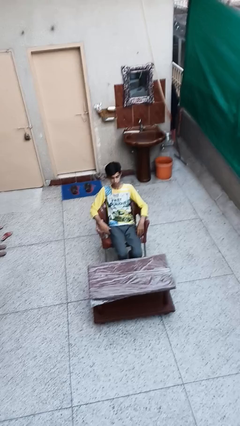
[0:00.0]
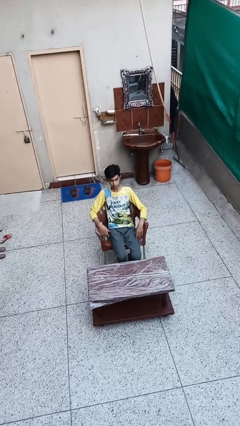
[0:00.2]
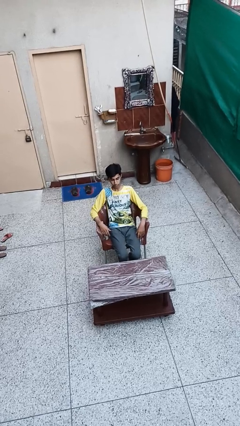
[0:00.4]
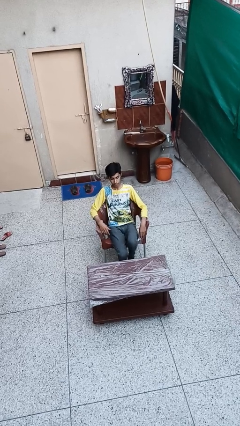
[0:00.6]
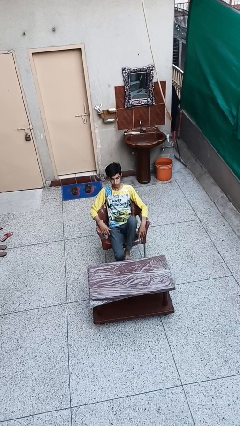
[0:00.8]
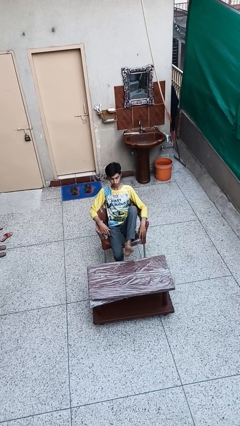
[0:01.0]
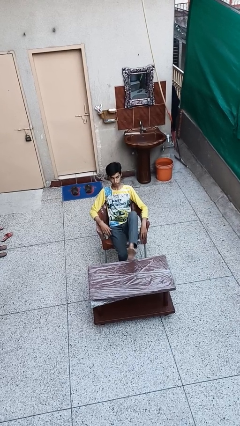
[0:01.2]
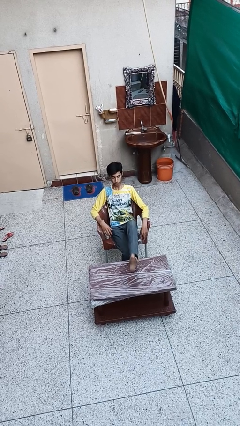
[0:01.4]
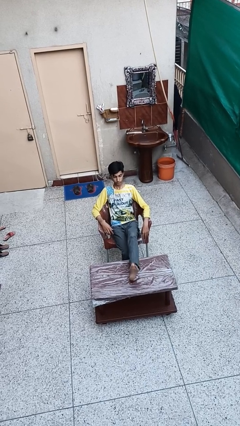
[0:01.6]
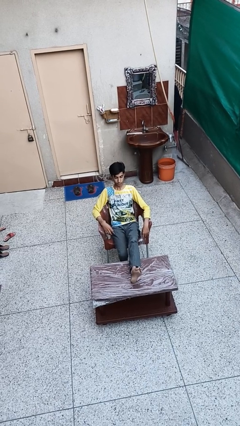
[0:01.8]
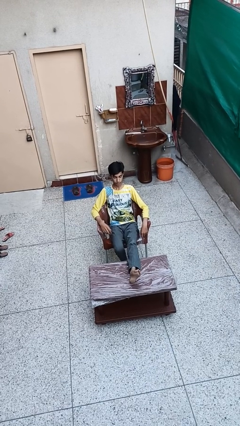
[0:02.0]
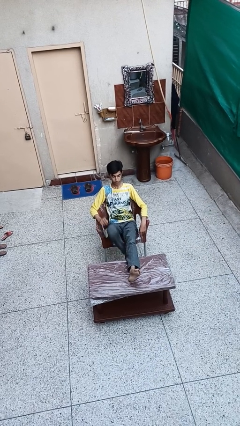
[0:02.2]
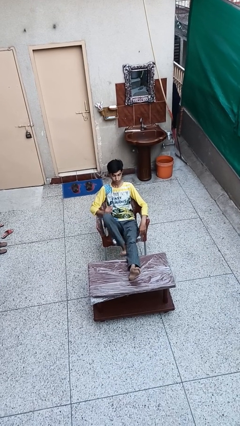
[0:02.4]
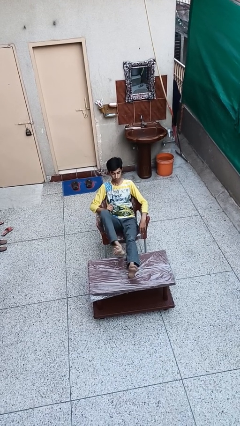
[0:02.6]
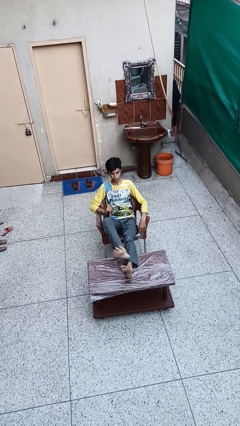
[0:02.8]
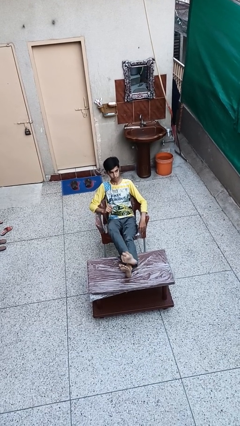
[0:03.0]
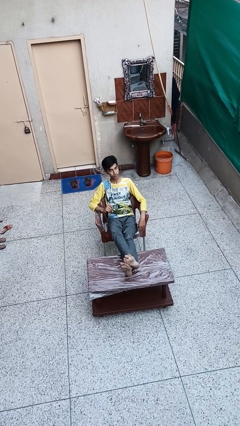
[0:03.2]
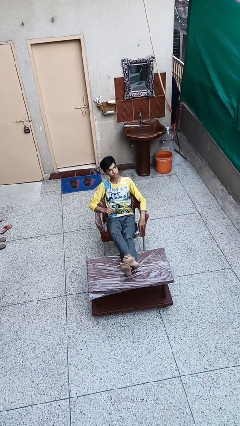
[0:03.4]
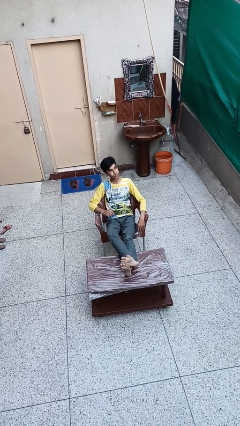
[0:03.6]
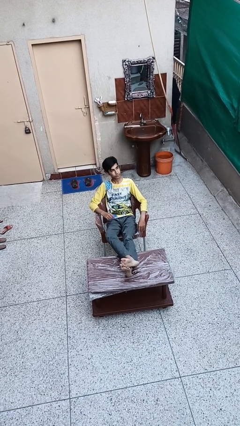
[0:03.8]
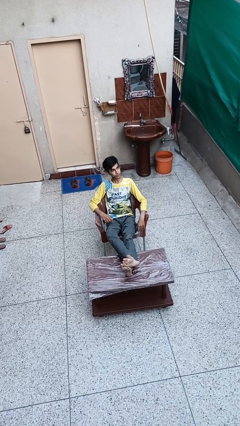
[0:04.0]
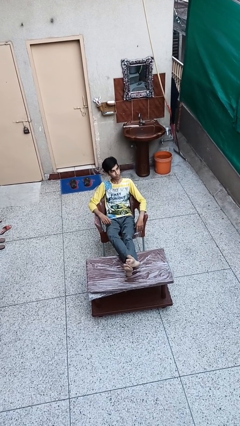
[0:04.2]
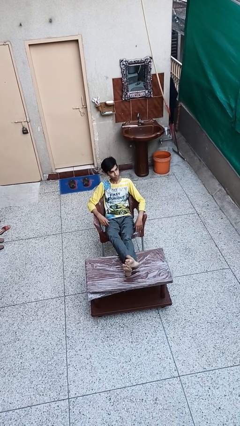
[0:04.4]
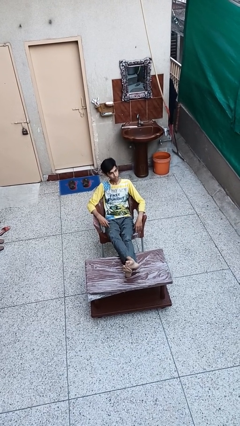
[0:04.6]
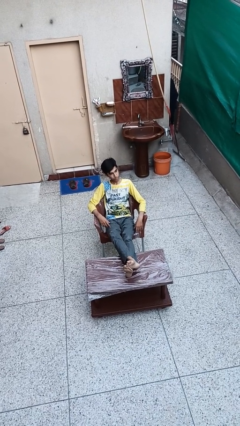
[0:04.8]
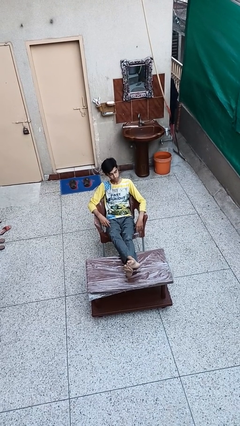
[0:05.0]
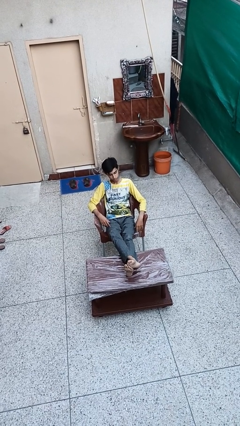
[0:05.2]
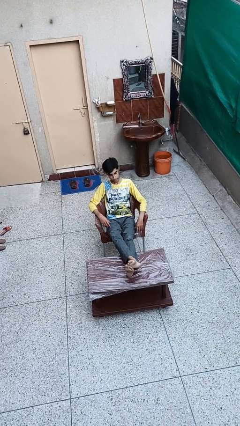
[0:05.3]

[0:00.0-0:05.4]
person puts feet up

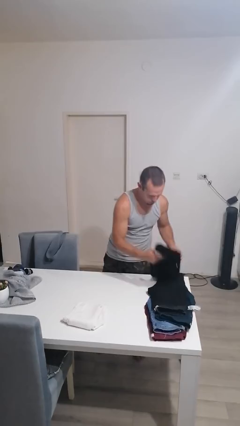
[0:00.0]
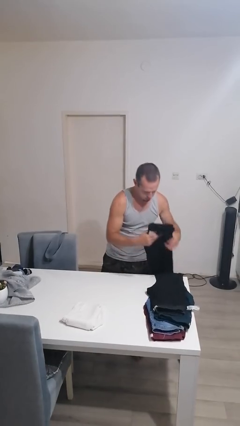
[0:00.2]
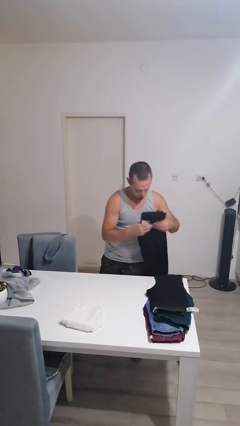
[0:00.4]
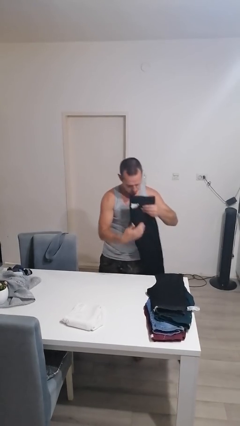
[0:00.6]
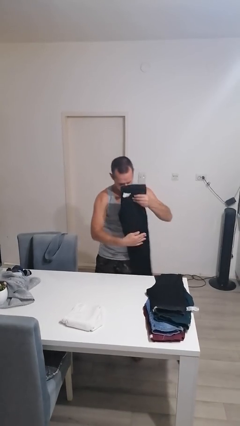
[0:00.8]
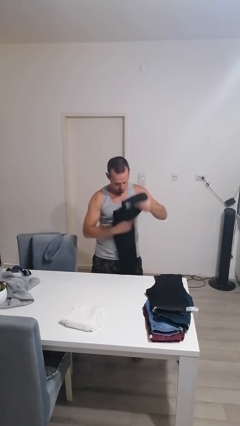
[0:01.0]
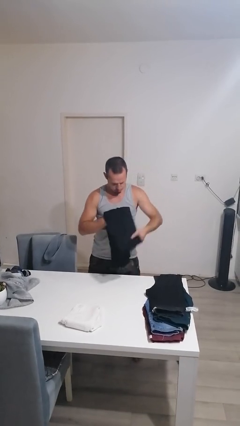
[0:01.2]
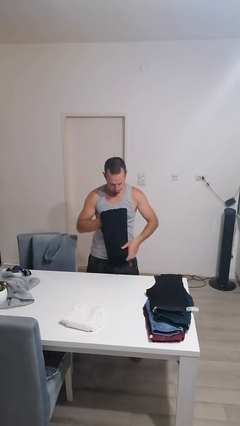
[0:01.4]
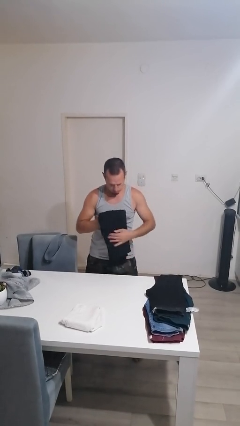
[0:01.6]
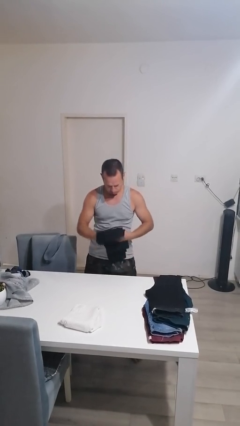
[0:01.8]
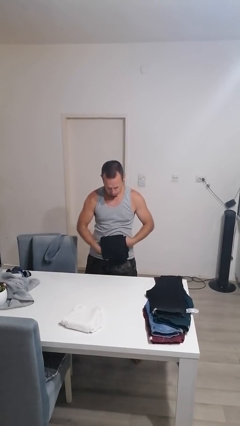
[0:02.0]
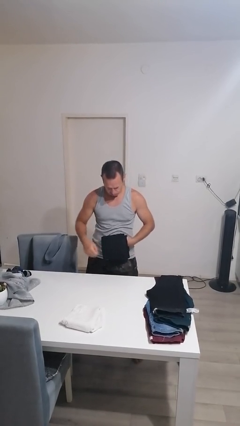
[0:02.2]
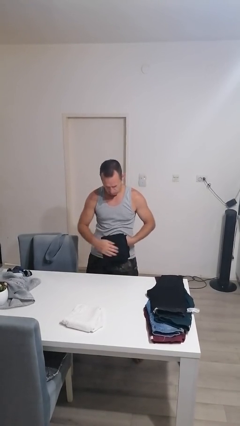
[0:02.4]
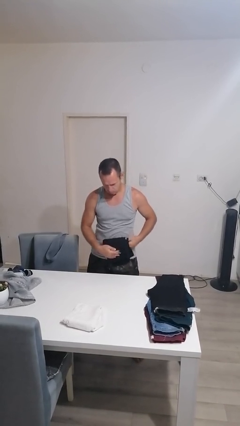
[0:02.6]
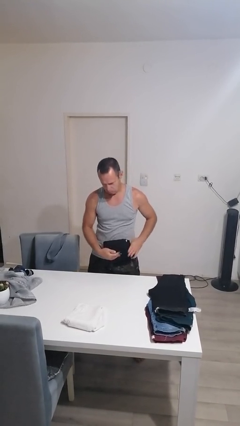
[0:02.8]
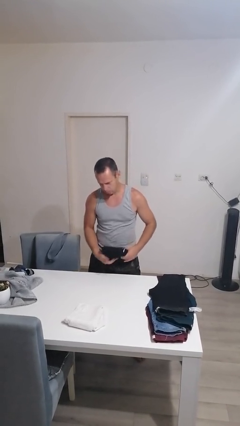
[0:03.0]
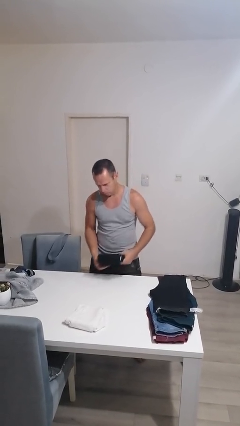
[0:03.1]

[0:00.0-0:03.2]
person folds pants

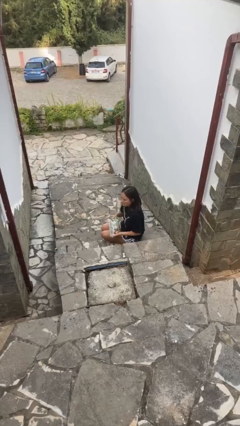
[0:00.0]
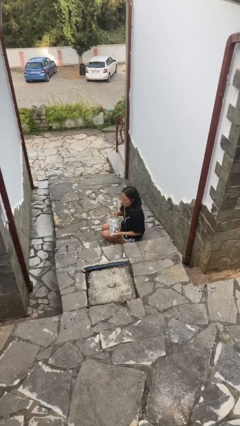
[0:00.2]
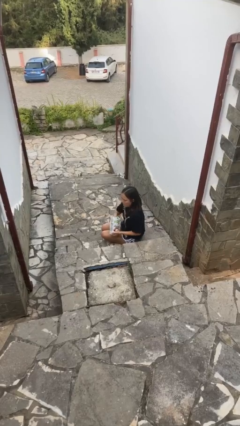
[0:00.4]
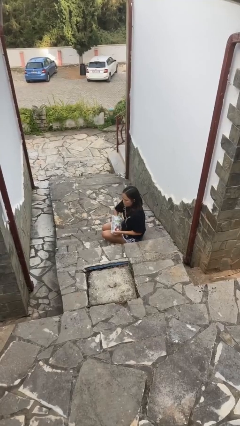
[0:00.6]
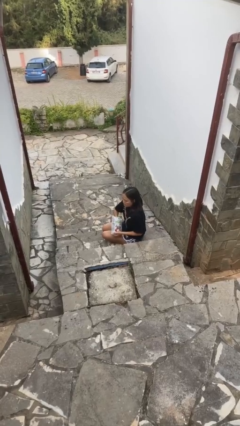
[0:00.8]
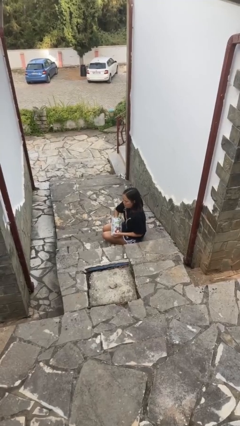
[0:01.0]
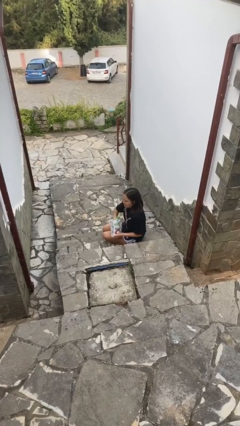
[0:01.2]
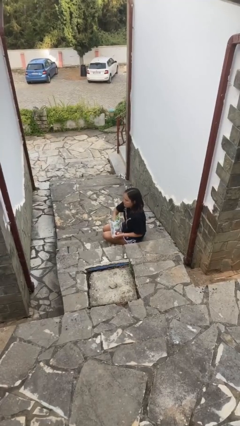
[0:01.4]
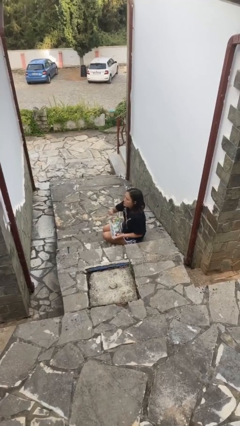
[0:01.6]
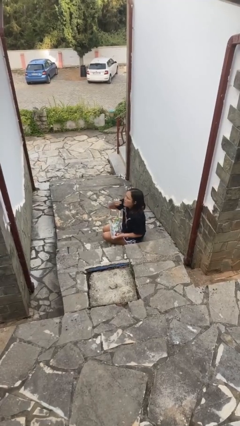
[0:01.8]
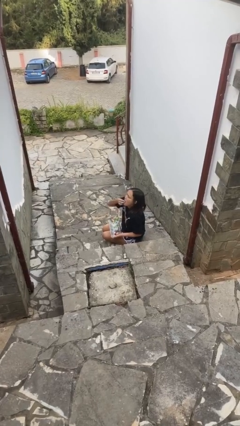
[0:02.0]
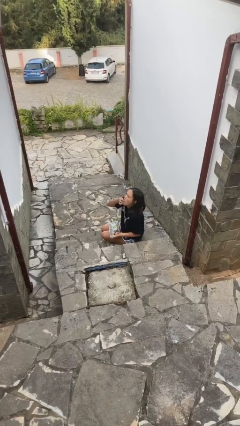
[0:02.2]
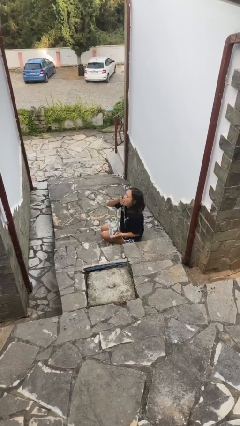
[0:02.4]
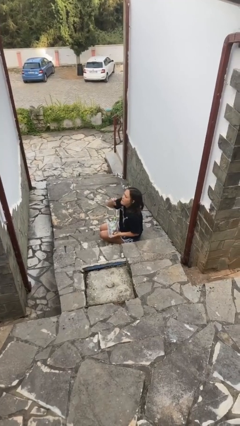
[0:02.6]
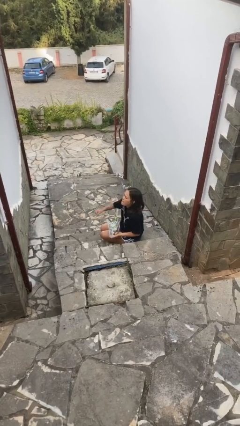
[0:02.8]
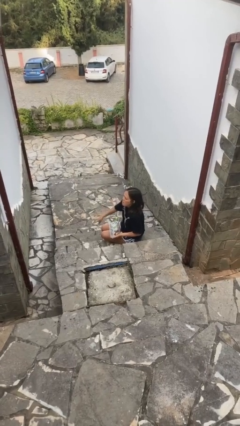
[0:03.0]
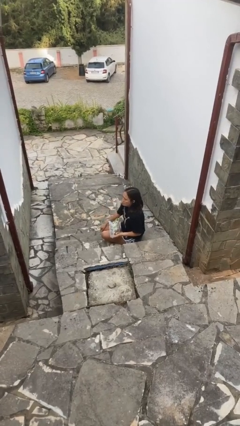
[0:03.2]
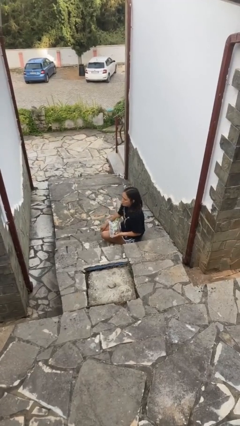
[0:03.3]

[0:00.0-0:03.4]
person eats snack from bag

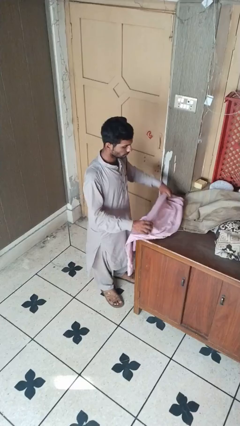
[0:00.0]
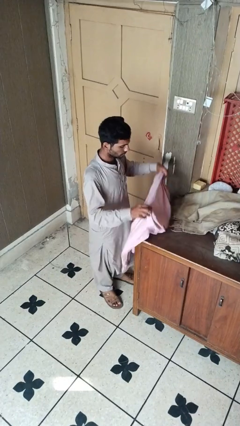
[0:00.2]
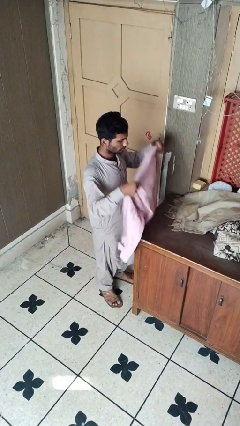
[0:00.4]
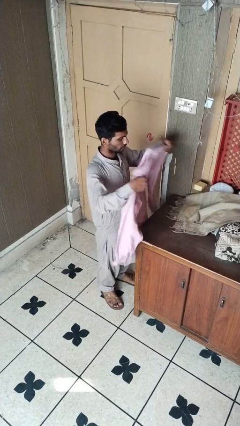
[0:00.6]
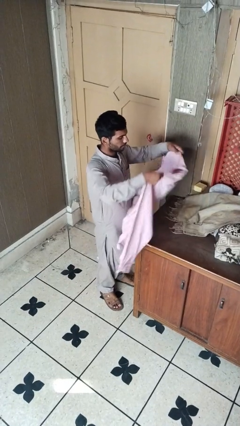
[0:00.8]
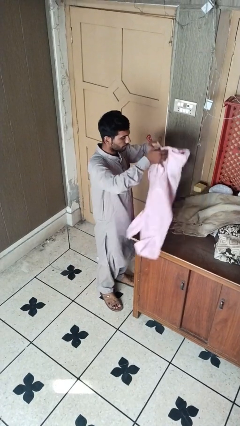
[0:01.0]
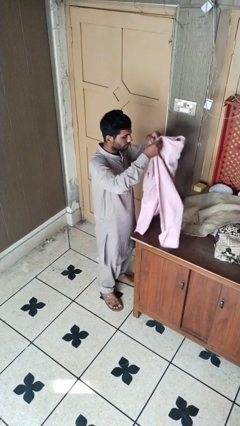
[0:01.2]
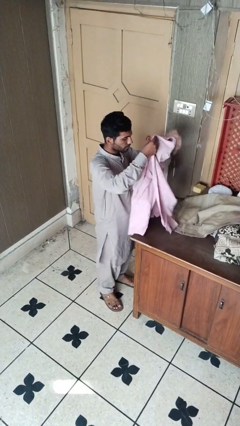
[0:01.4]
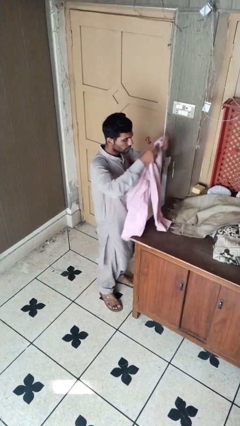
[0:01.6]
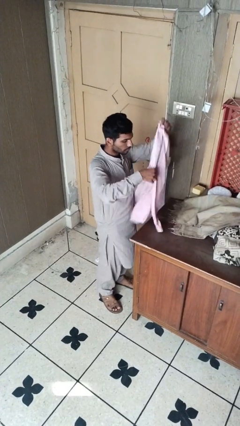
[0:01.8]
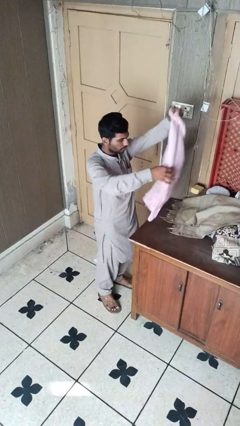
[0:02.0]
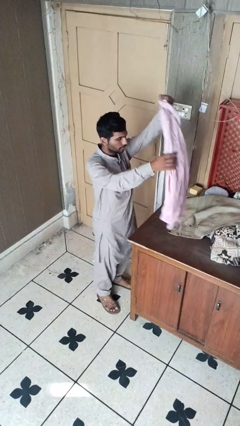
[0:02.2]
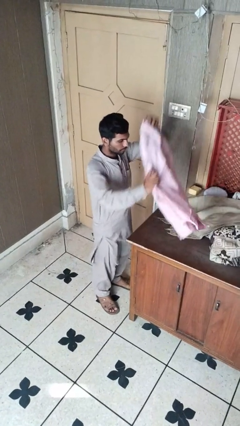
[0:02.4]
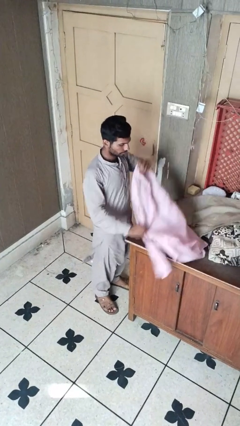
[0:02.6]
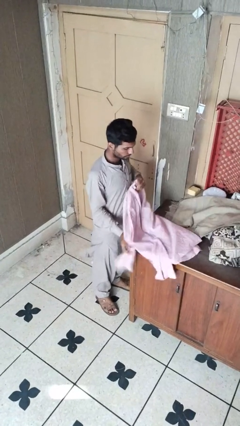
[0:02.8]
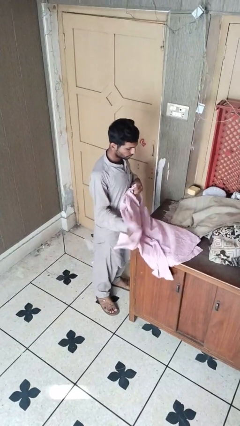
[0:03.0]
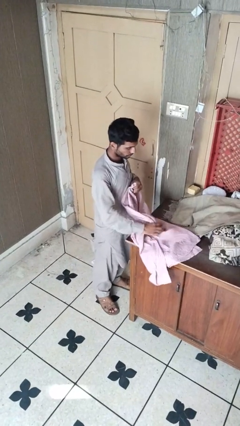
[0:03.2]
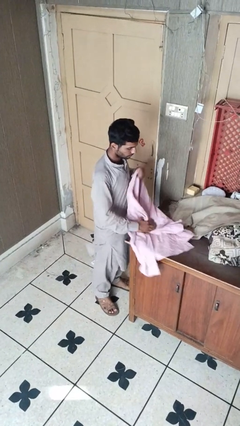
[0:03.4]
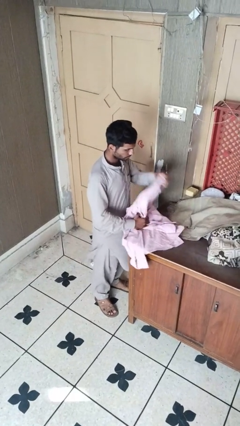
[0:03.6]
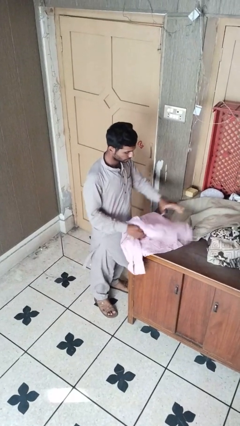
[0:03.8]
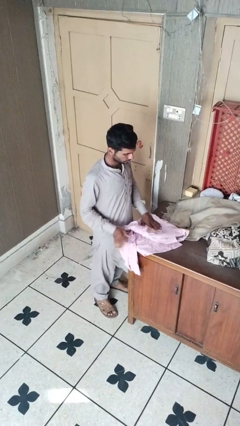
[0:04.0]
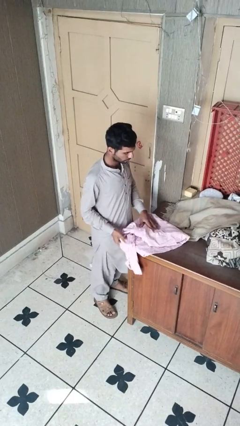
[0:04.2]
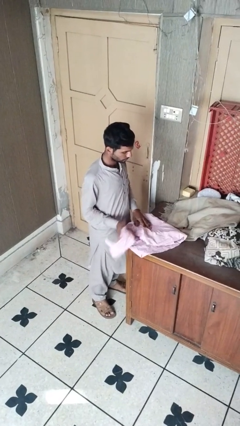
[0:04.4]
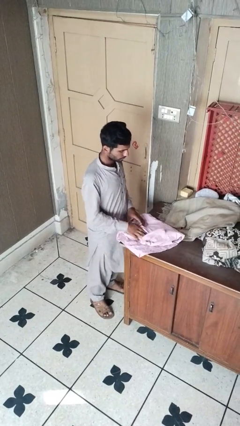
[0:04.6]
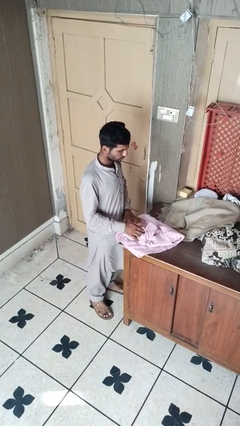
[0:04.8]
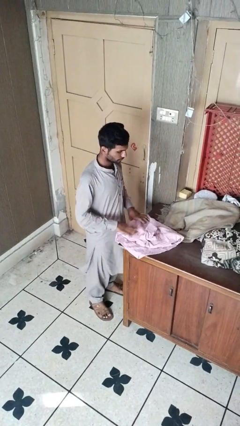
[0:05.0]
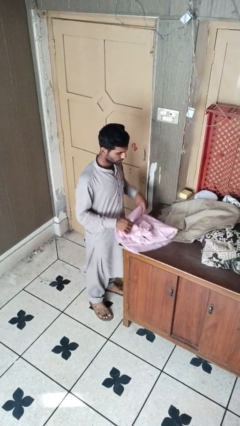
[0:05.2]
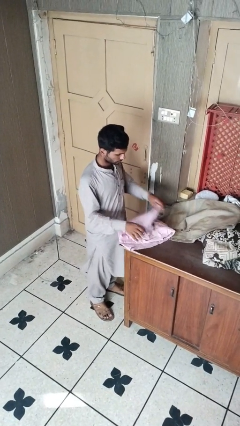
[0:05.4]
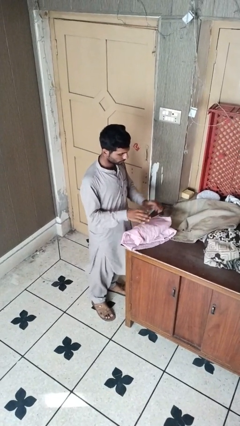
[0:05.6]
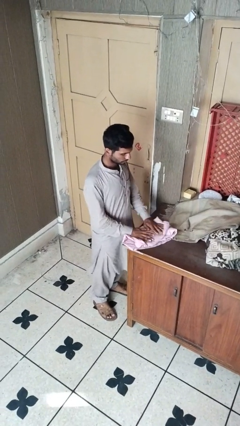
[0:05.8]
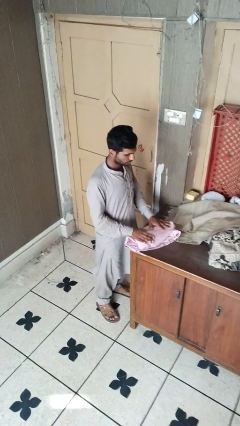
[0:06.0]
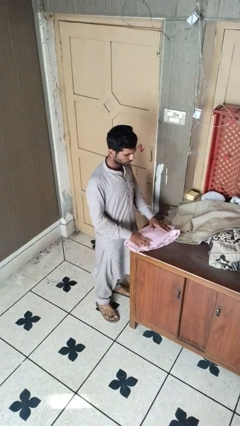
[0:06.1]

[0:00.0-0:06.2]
person folds shirt
